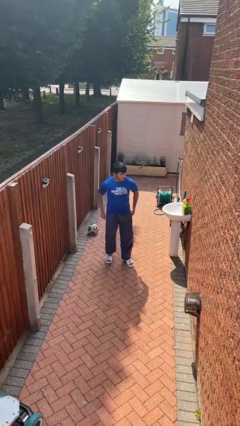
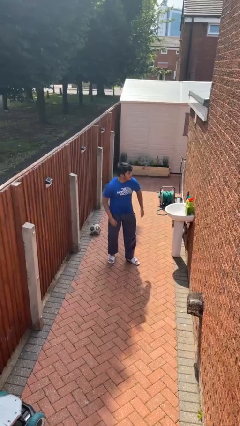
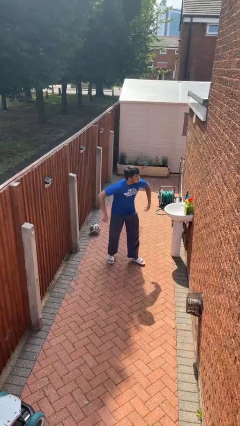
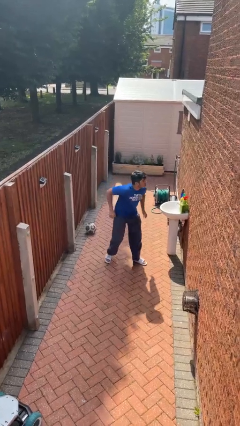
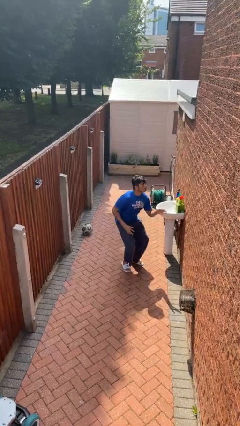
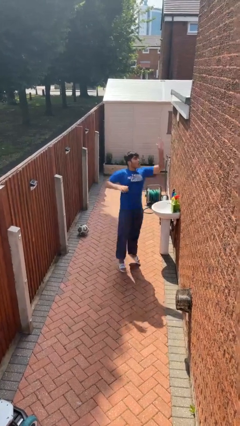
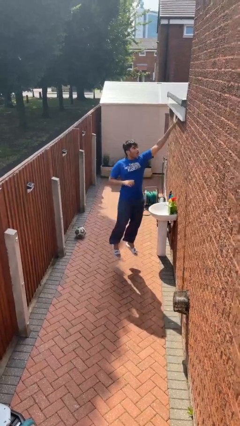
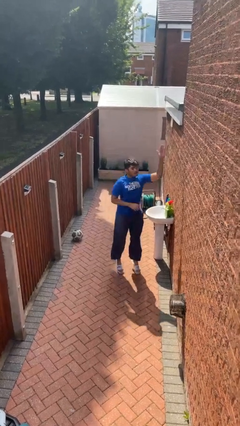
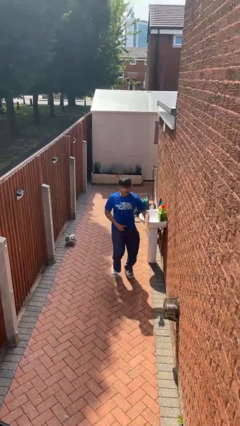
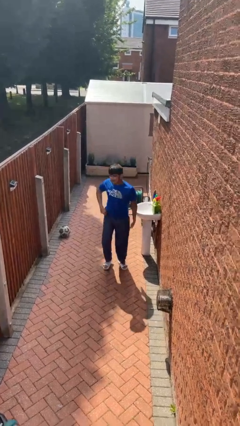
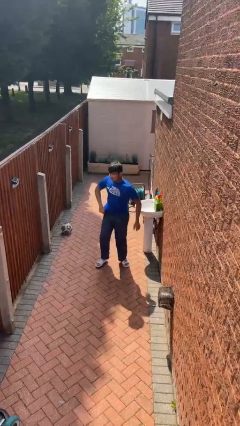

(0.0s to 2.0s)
person jumps

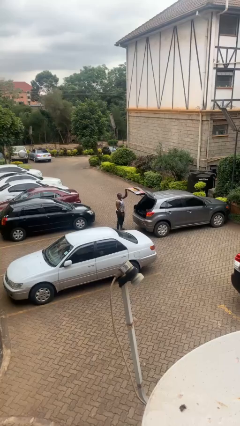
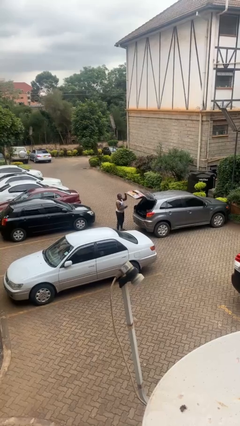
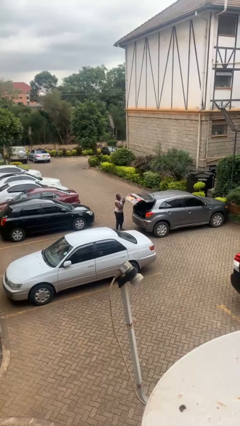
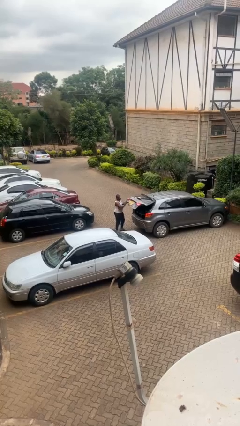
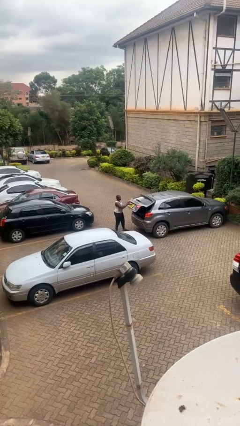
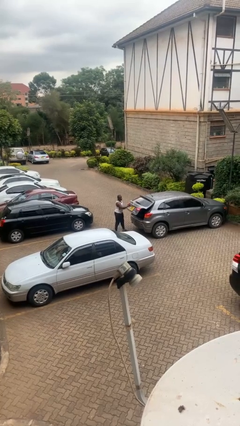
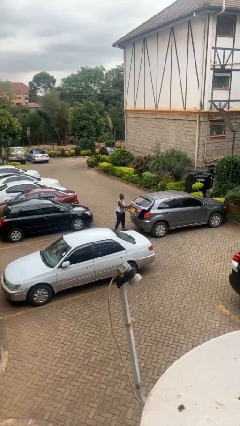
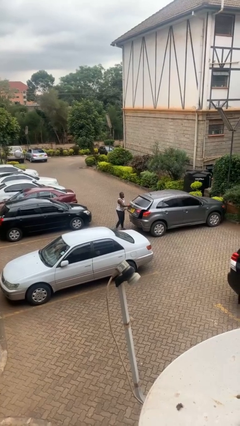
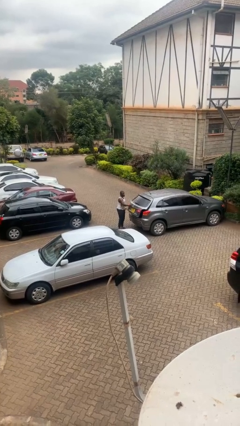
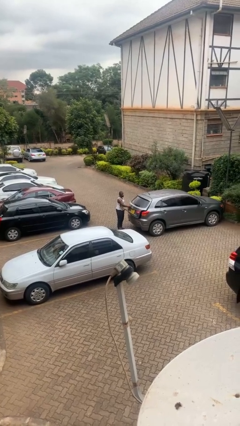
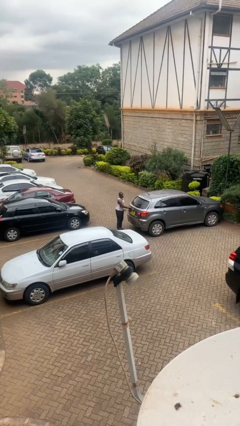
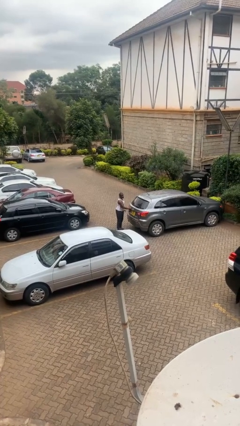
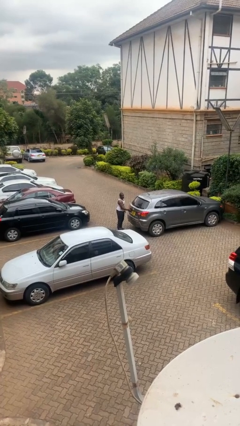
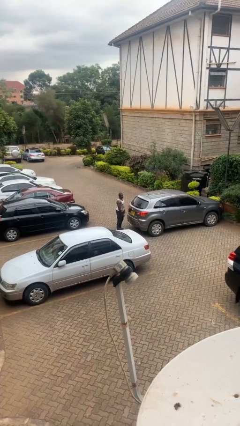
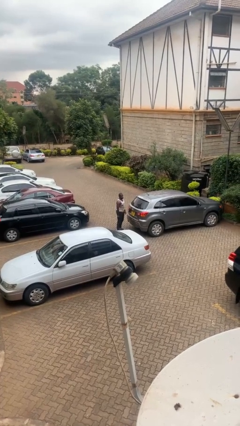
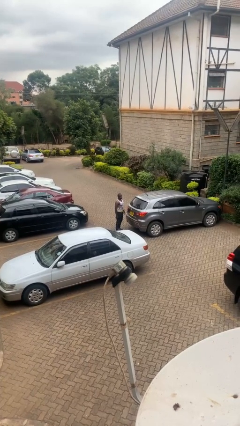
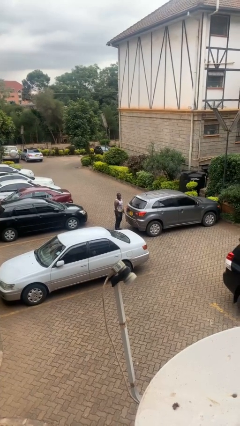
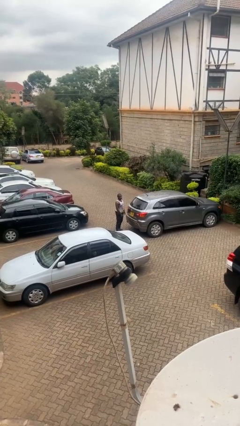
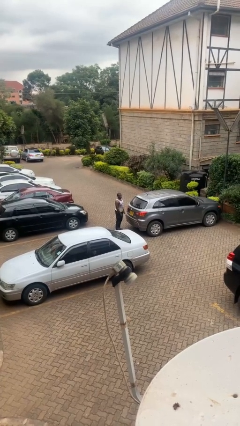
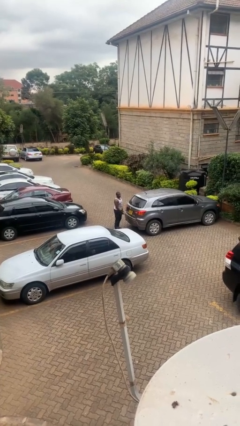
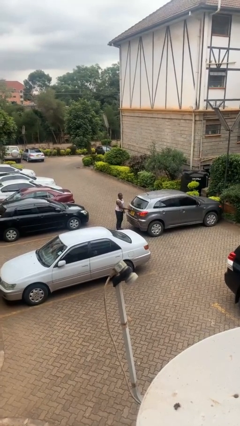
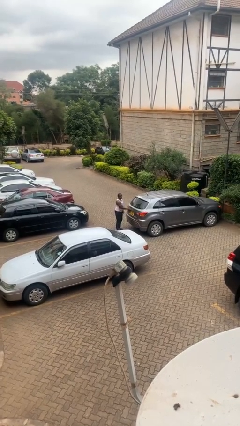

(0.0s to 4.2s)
person closes car trunk

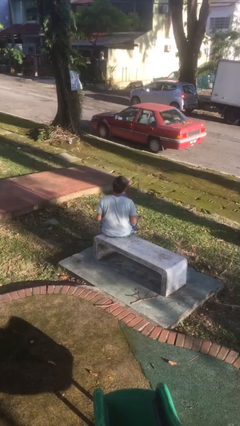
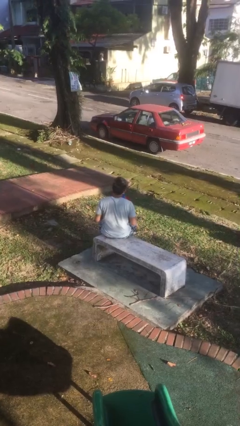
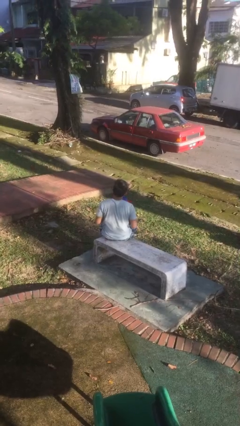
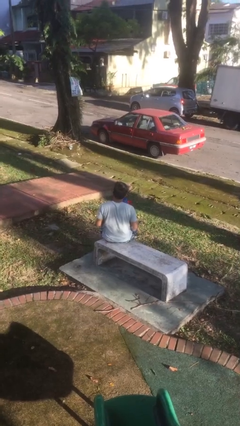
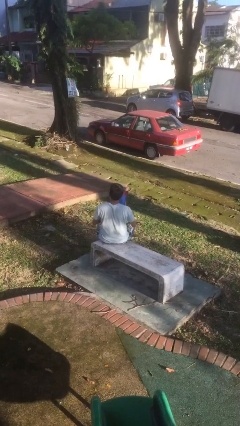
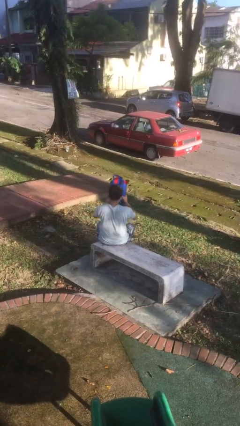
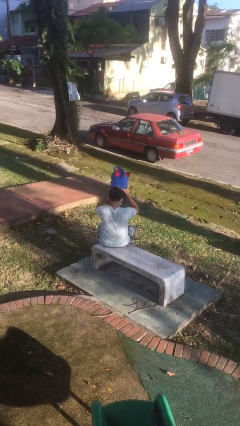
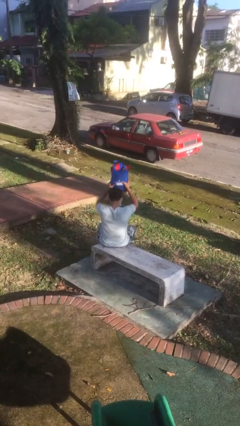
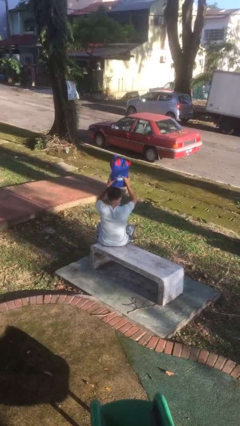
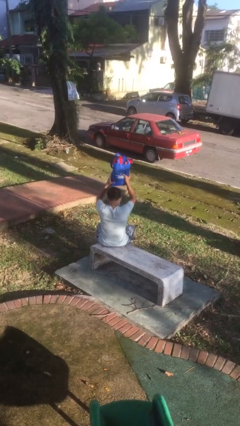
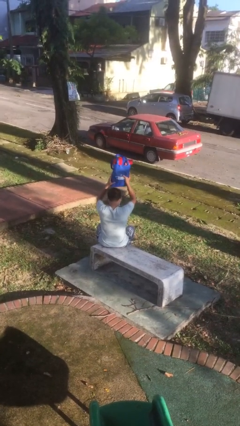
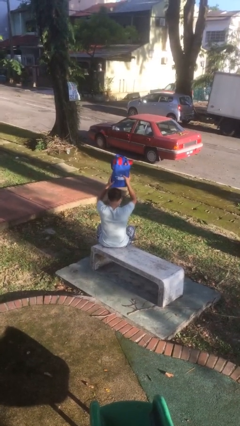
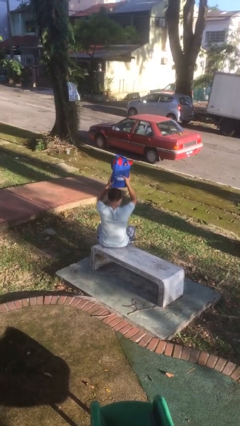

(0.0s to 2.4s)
person holds object above head

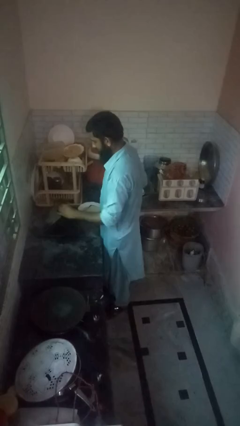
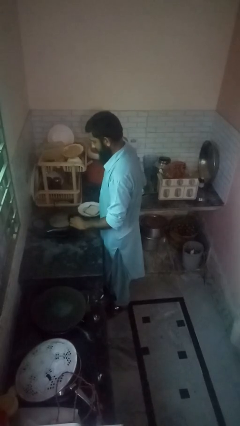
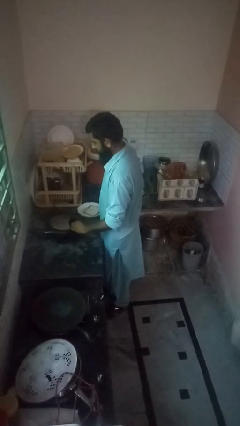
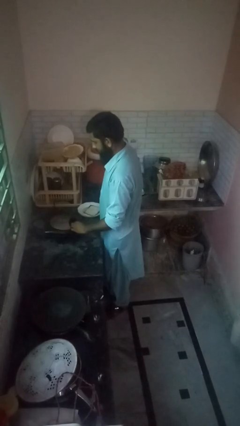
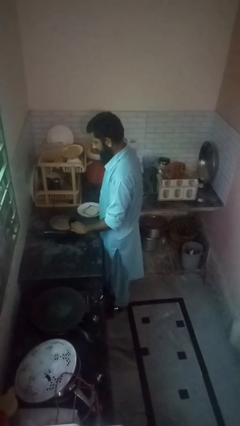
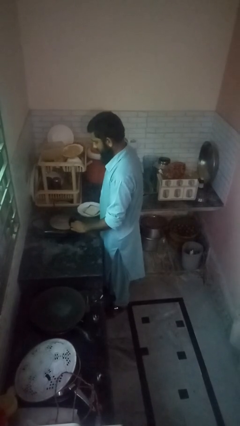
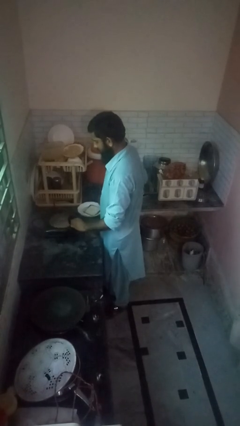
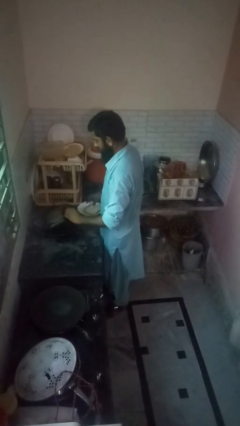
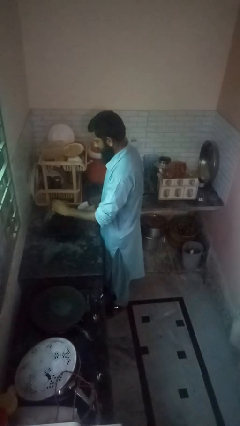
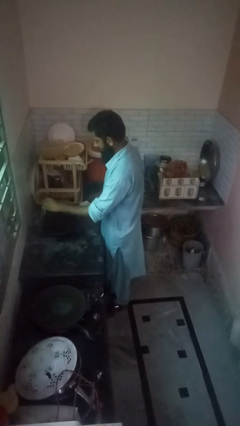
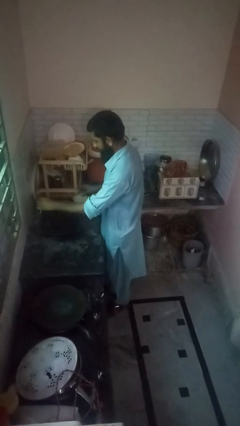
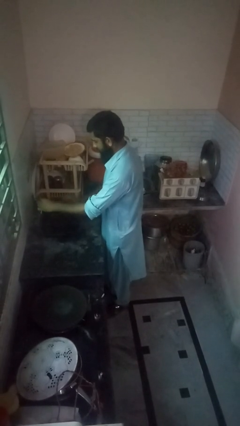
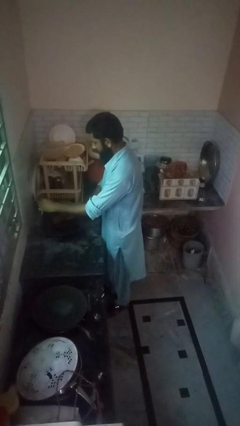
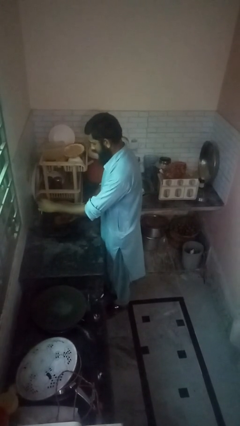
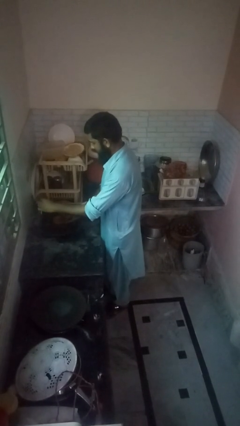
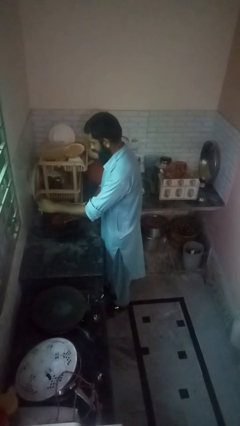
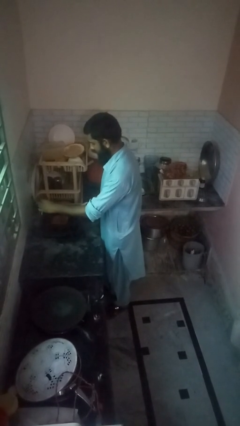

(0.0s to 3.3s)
person puts object into toaster

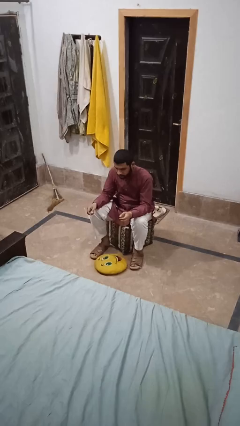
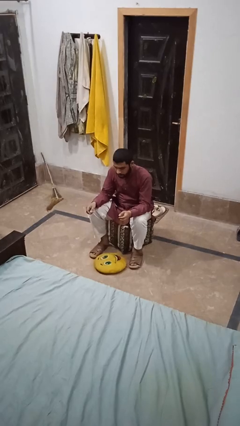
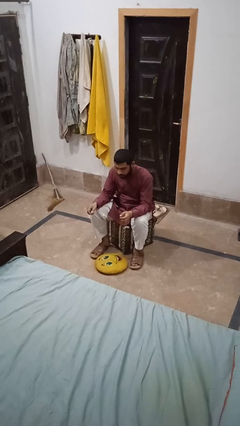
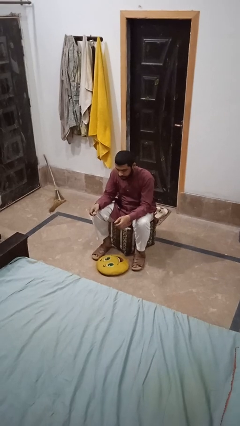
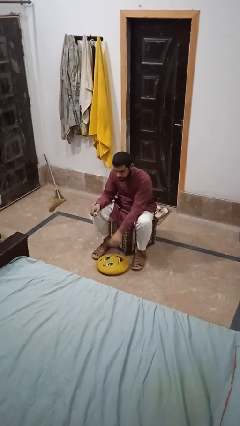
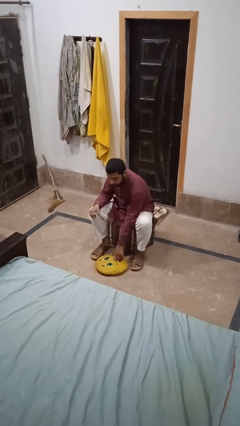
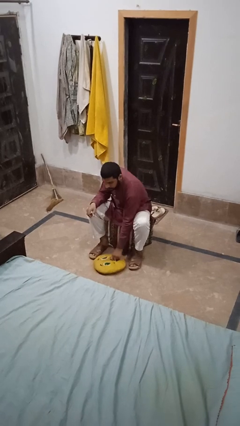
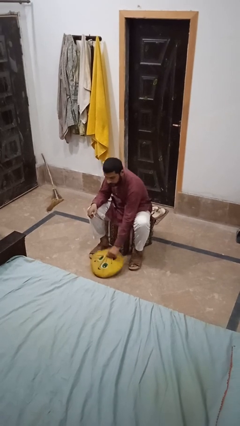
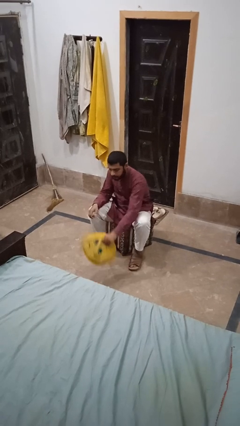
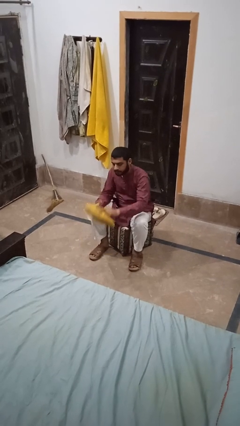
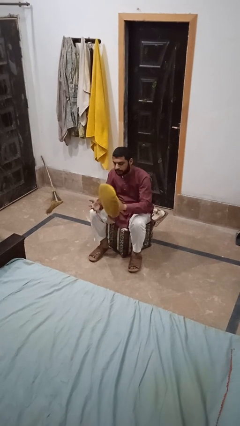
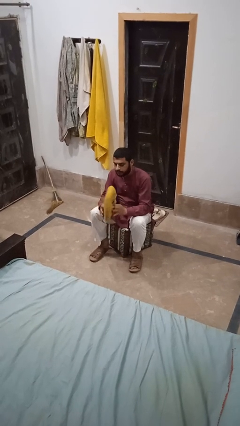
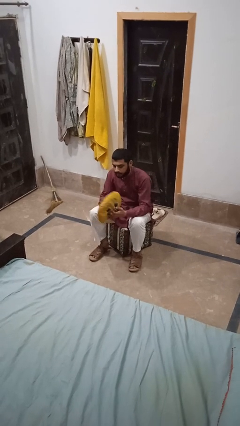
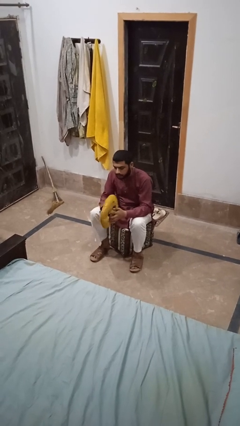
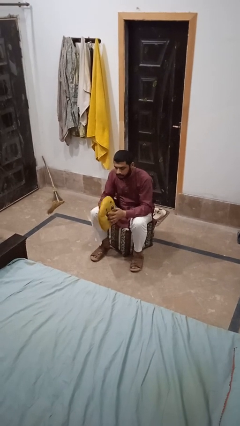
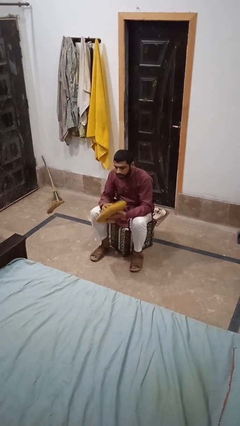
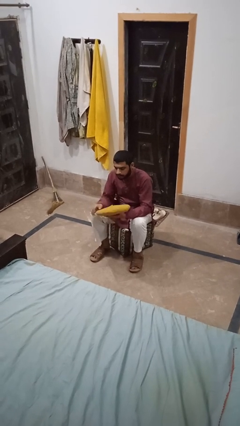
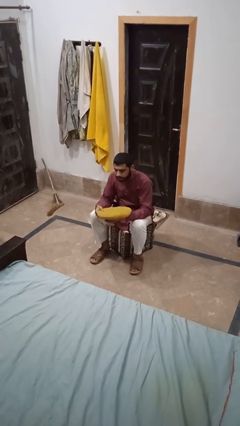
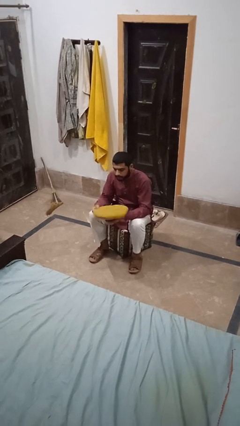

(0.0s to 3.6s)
person picks up object from floor

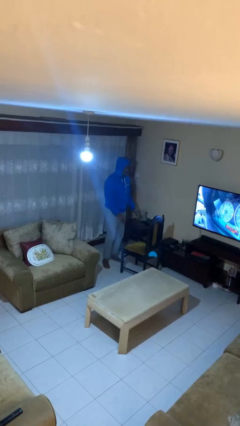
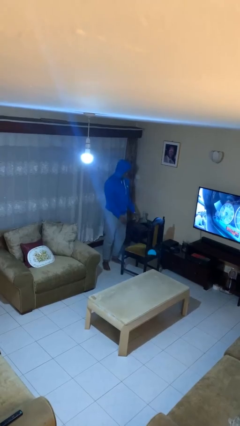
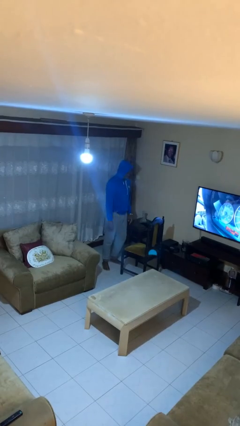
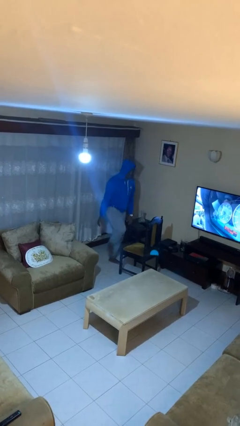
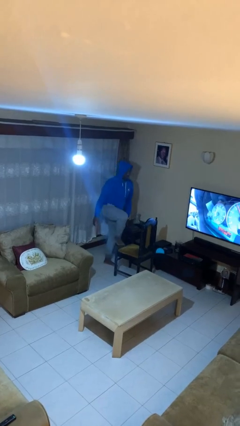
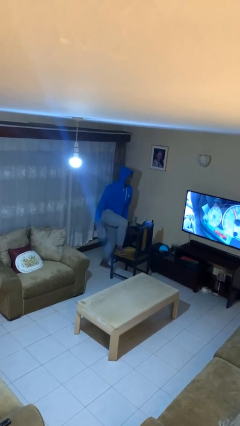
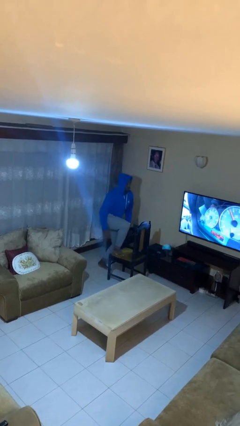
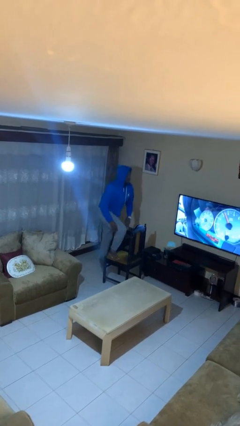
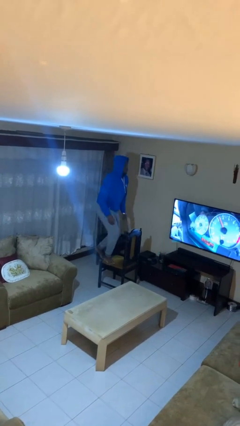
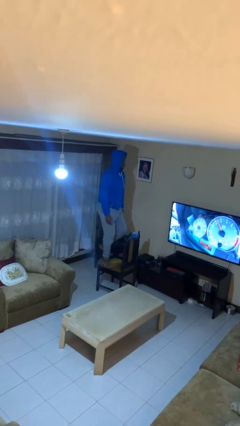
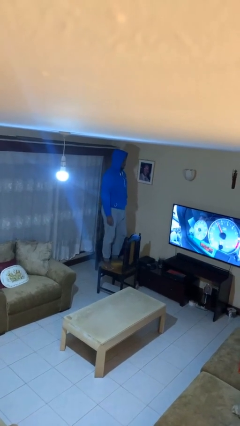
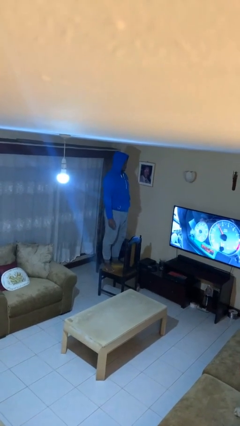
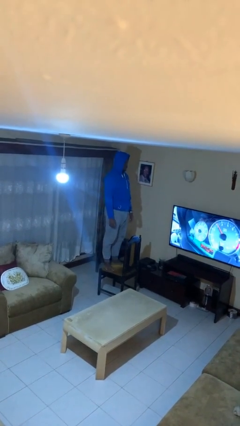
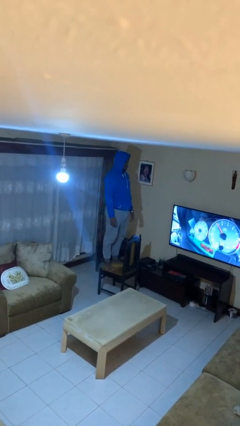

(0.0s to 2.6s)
person climbs on chair
